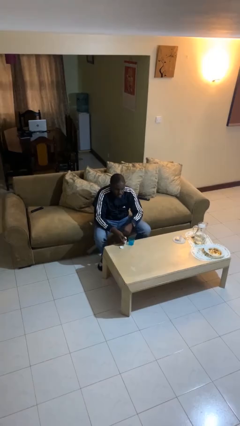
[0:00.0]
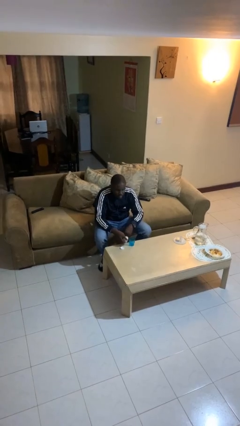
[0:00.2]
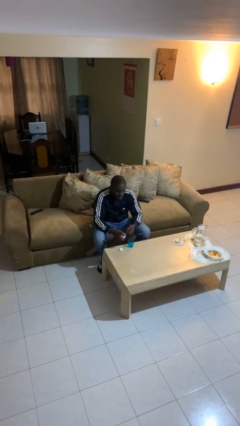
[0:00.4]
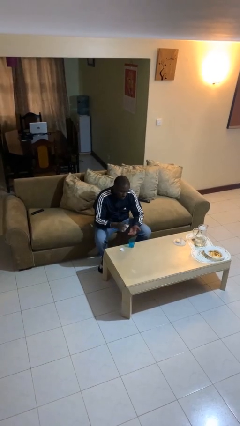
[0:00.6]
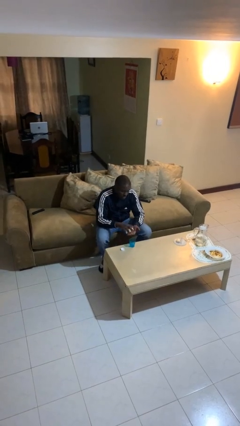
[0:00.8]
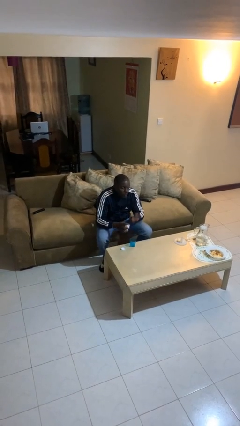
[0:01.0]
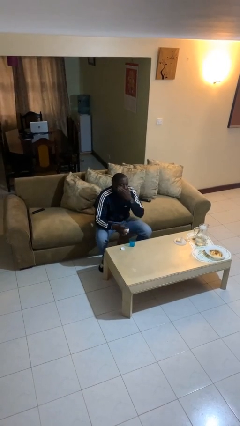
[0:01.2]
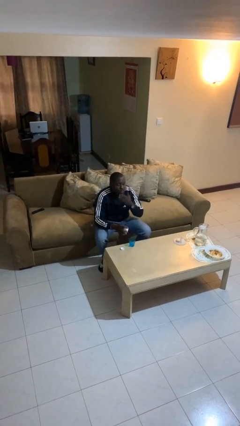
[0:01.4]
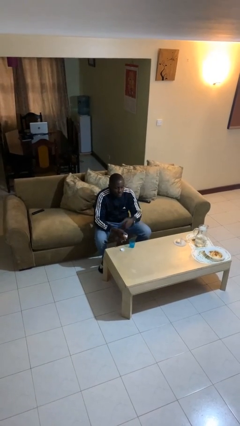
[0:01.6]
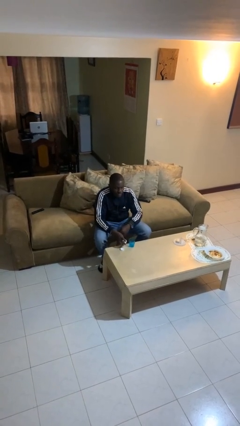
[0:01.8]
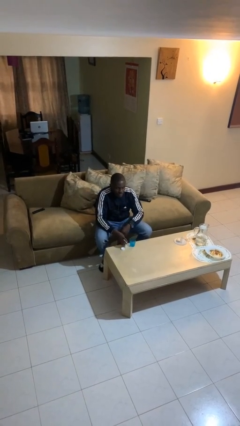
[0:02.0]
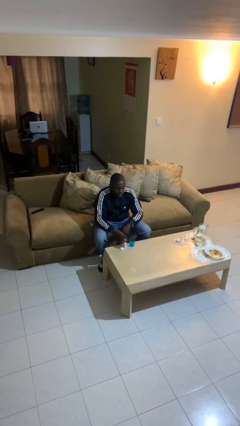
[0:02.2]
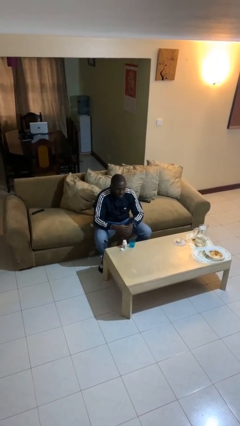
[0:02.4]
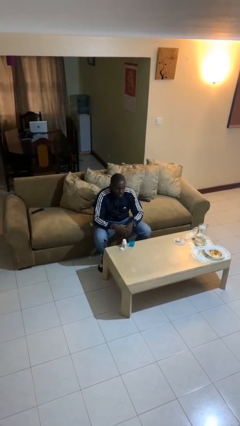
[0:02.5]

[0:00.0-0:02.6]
person takes medicine pills

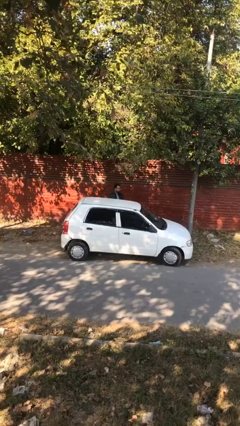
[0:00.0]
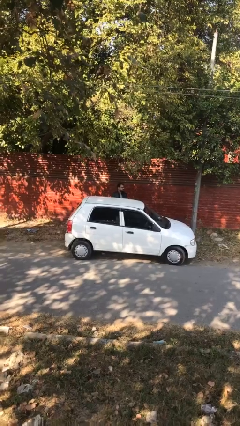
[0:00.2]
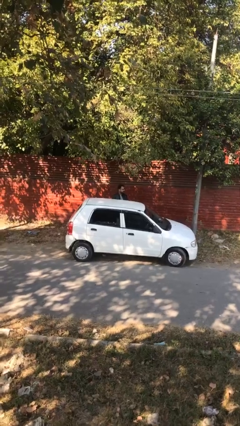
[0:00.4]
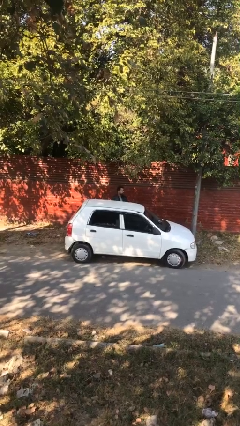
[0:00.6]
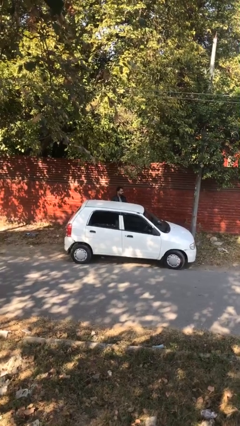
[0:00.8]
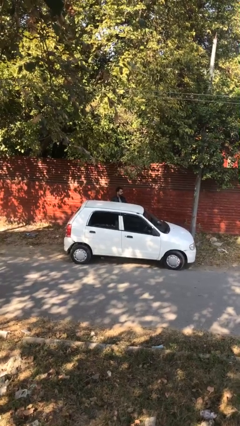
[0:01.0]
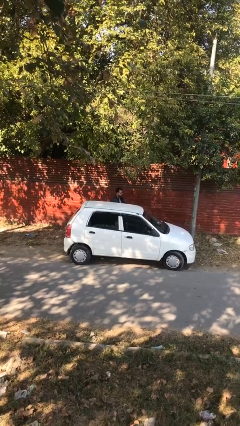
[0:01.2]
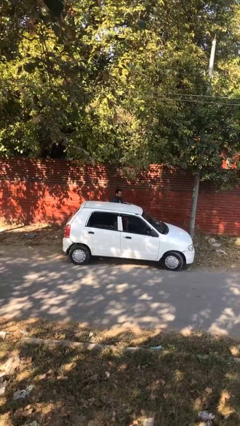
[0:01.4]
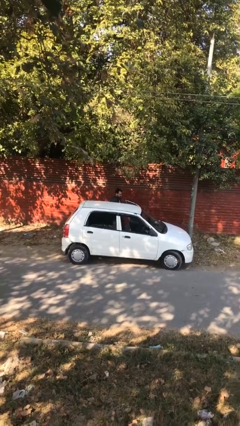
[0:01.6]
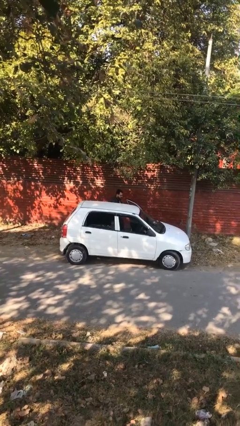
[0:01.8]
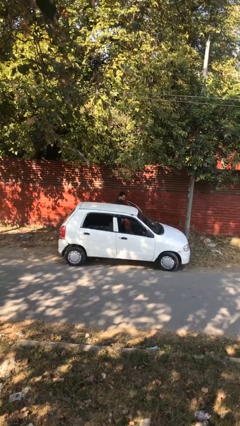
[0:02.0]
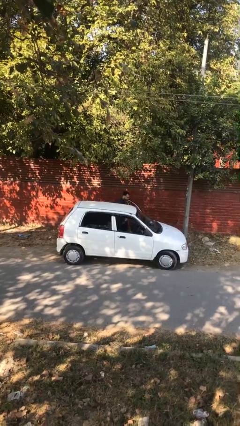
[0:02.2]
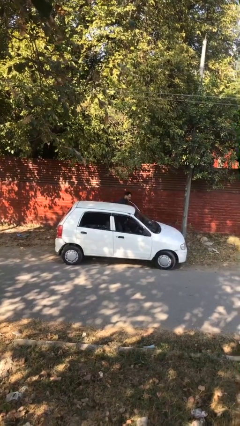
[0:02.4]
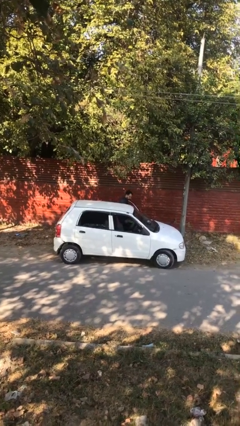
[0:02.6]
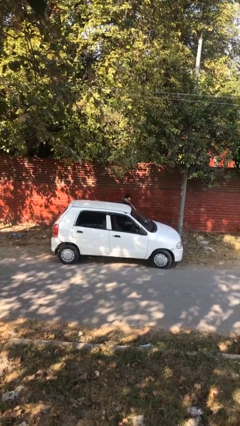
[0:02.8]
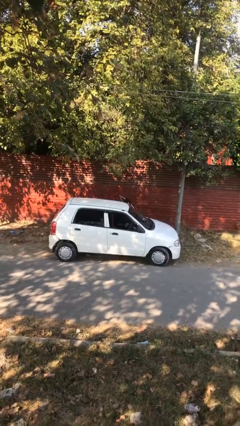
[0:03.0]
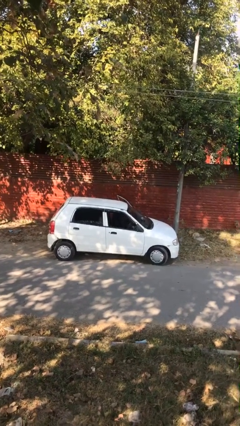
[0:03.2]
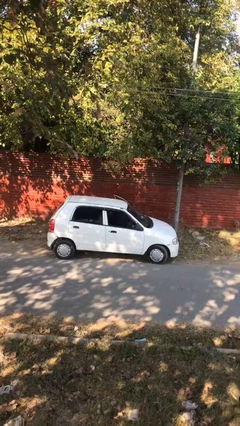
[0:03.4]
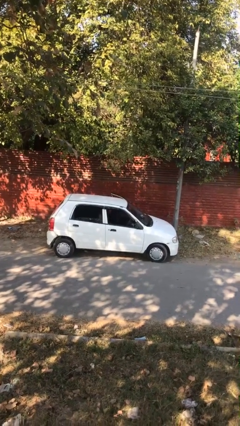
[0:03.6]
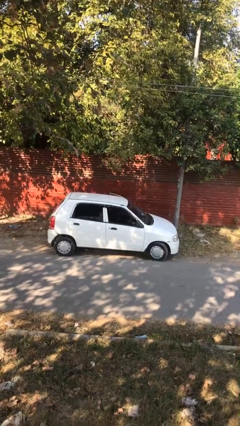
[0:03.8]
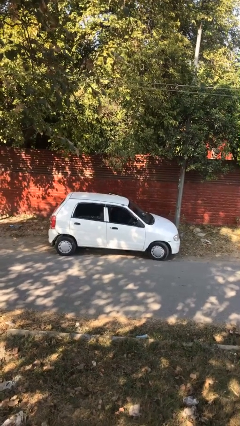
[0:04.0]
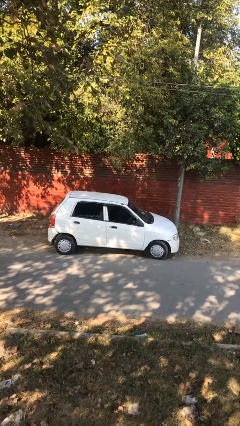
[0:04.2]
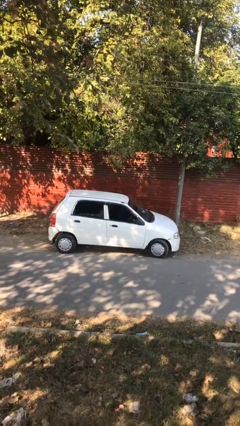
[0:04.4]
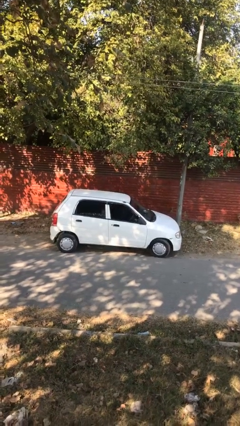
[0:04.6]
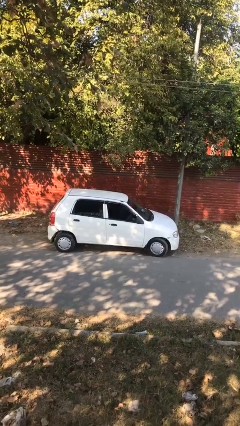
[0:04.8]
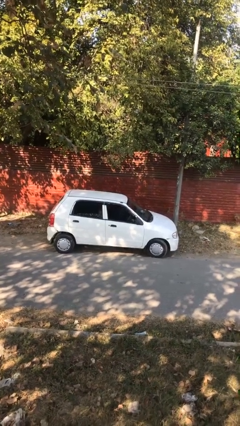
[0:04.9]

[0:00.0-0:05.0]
person enters car

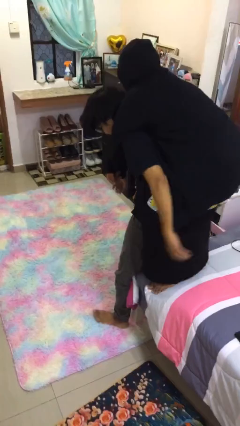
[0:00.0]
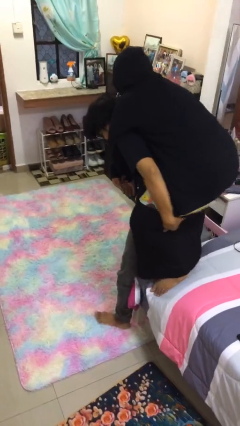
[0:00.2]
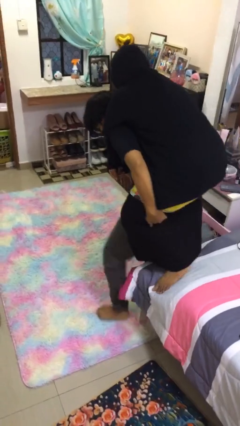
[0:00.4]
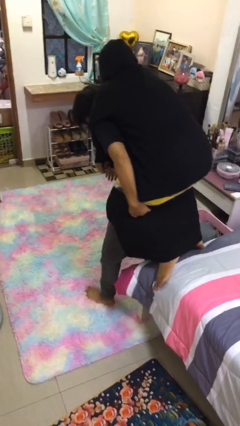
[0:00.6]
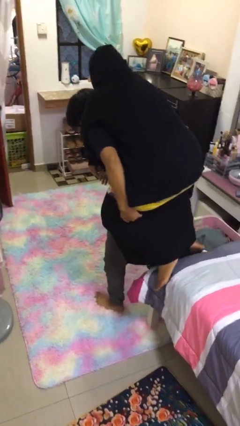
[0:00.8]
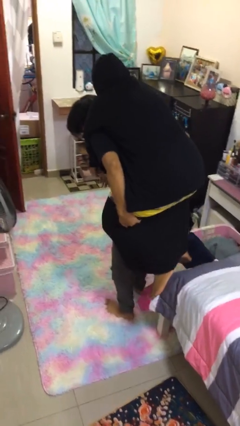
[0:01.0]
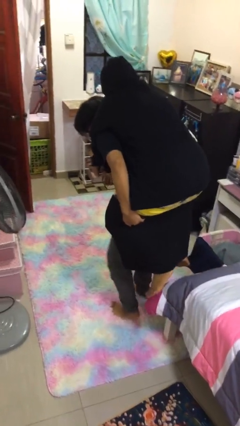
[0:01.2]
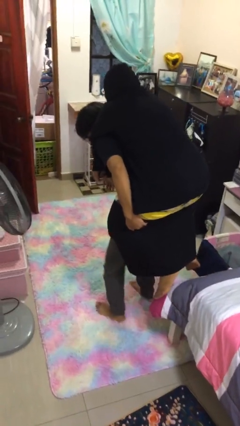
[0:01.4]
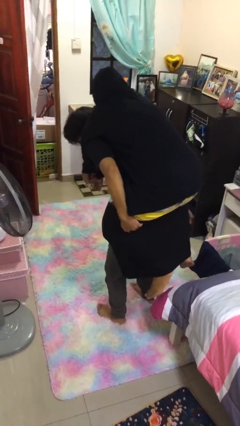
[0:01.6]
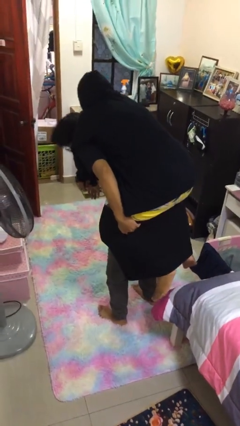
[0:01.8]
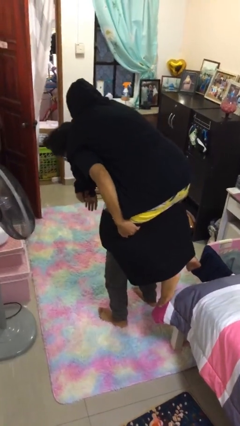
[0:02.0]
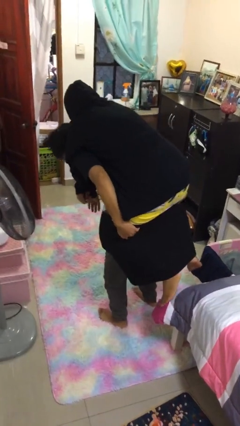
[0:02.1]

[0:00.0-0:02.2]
person carries person over shoulder

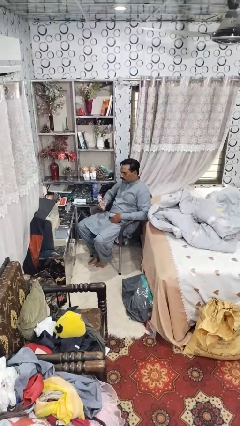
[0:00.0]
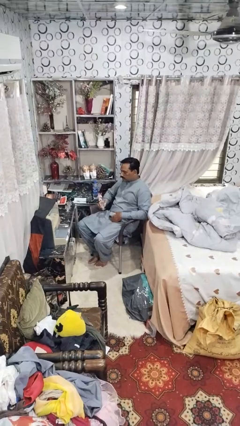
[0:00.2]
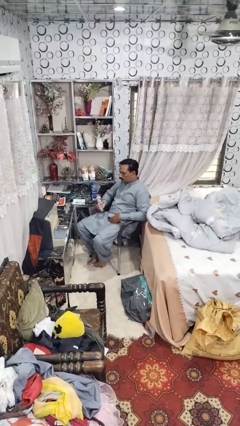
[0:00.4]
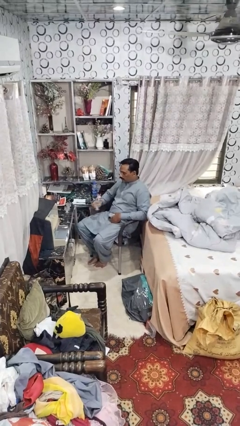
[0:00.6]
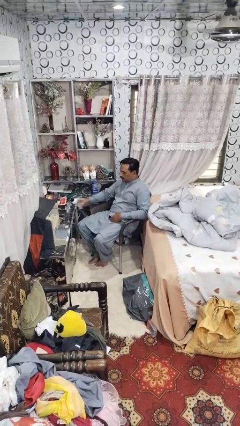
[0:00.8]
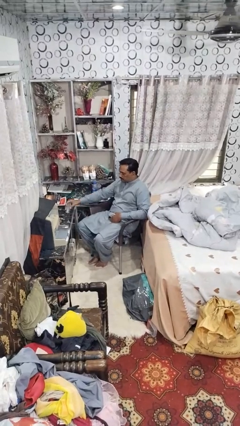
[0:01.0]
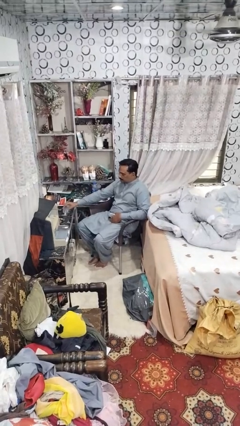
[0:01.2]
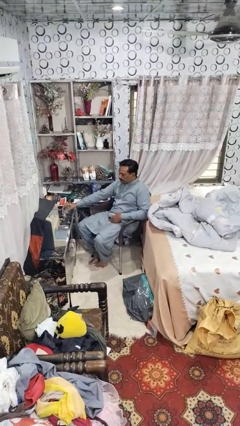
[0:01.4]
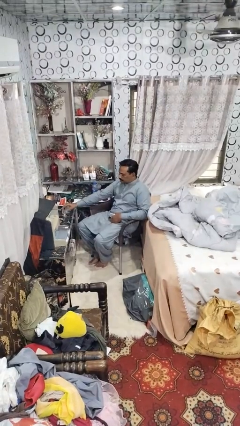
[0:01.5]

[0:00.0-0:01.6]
person puts down object on table

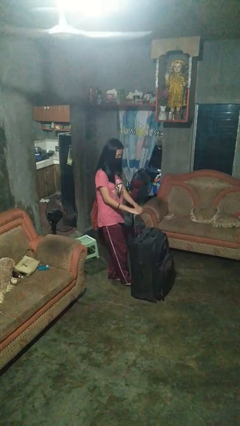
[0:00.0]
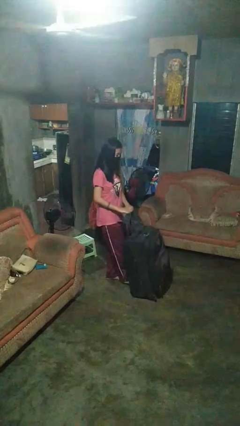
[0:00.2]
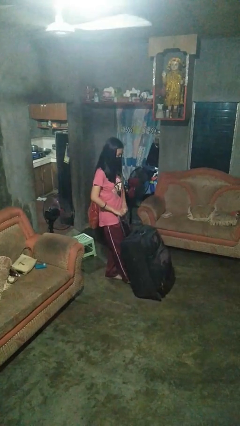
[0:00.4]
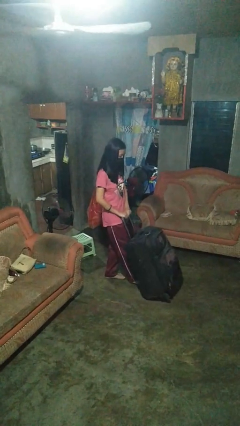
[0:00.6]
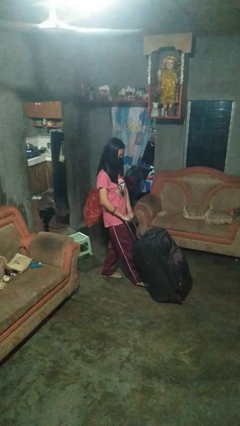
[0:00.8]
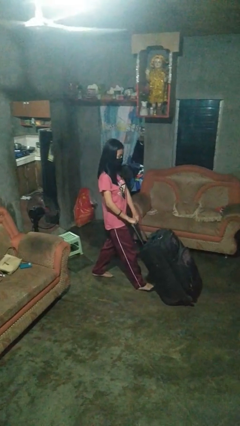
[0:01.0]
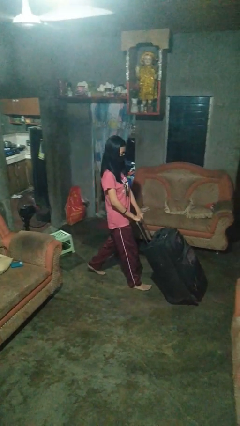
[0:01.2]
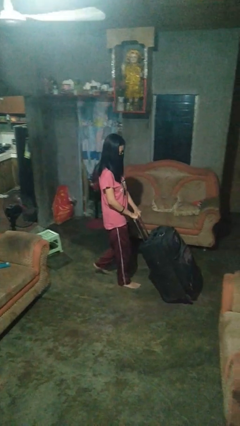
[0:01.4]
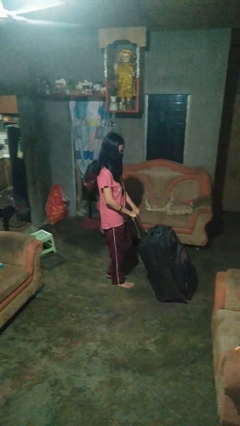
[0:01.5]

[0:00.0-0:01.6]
person pushes wheeled cart

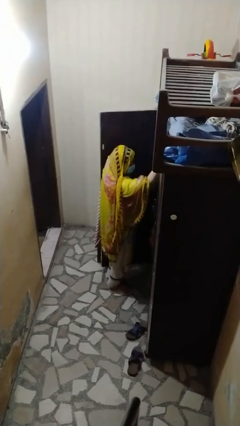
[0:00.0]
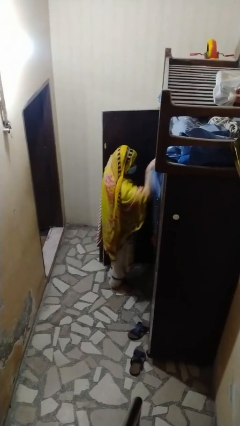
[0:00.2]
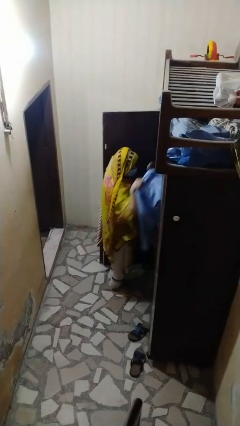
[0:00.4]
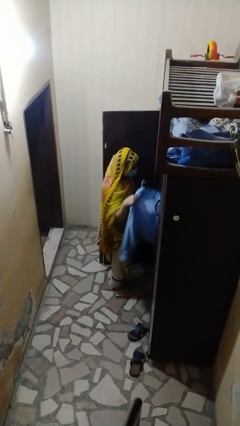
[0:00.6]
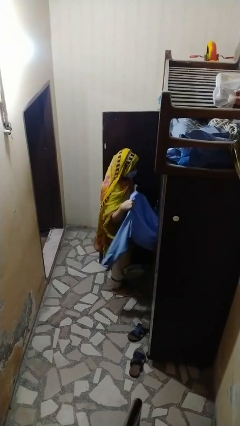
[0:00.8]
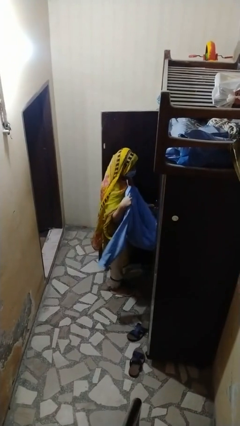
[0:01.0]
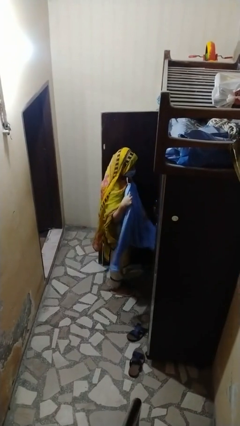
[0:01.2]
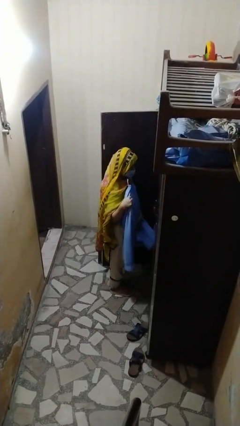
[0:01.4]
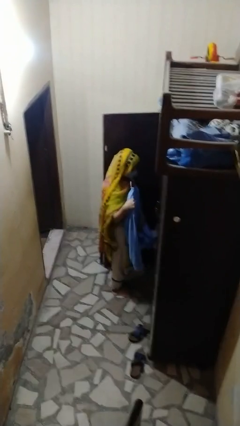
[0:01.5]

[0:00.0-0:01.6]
person takes clothes from closet

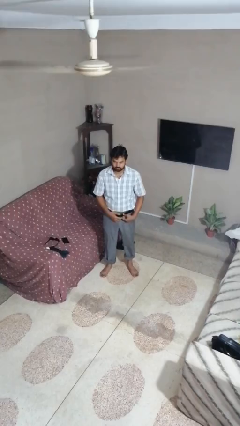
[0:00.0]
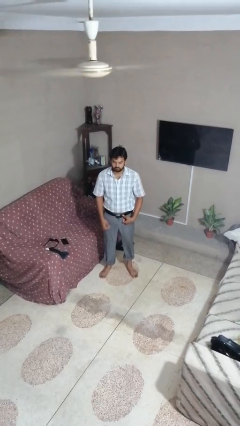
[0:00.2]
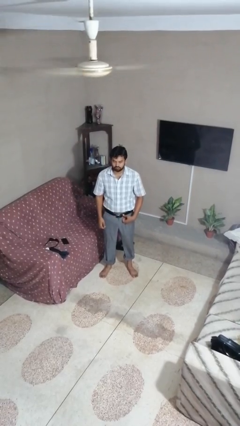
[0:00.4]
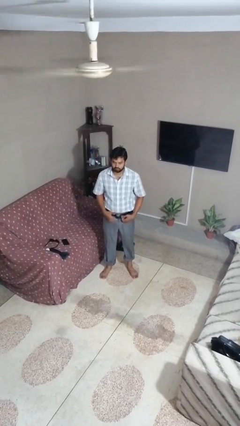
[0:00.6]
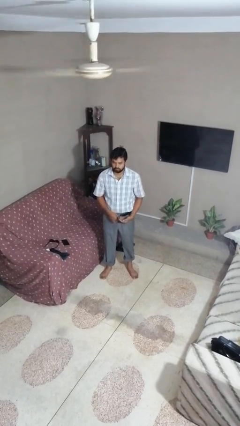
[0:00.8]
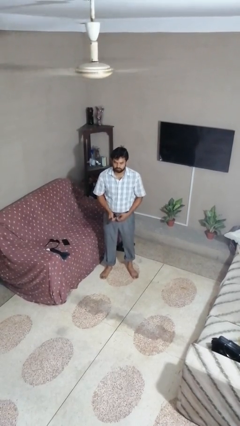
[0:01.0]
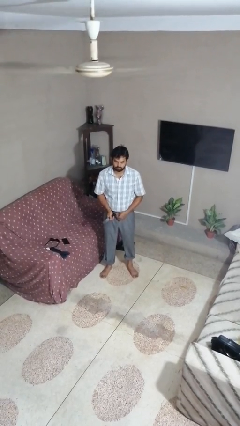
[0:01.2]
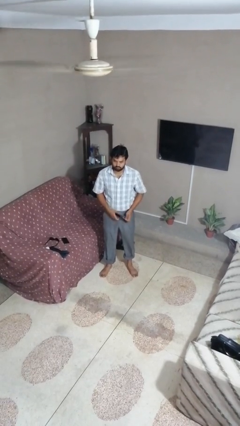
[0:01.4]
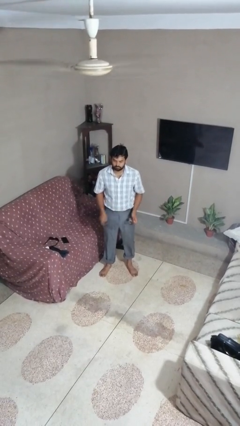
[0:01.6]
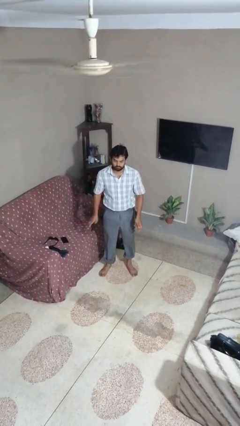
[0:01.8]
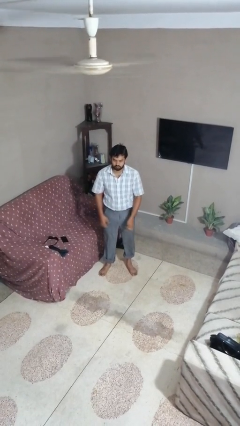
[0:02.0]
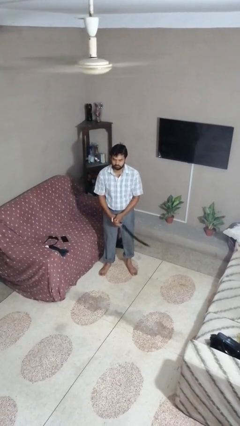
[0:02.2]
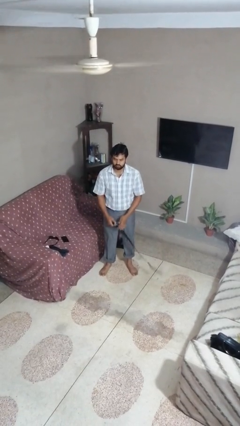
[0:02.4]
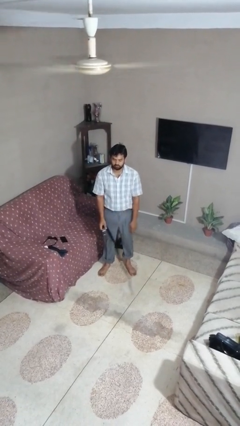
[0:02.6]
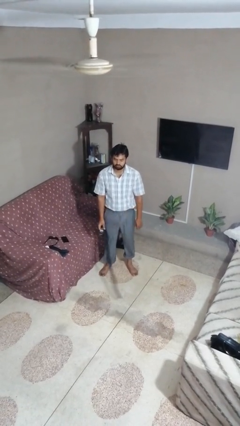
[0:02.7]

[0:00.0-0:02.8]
person takes off belt
